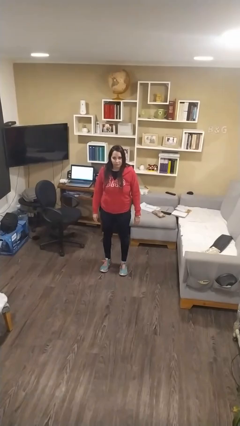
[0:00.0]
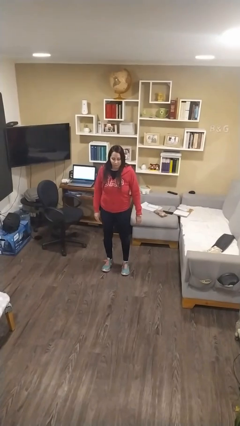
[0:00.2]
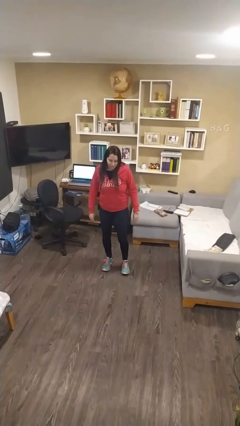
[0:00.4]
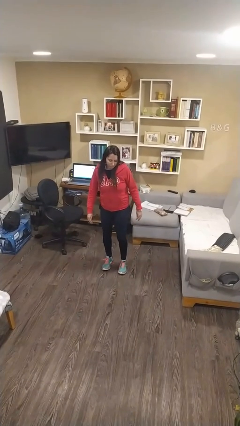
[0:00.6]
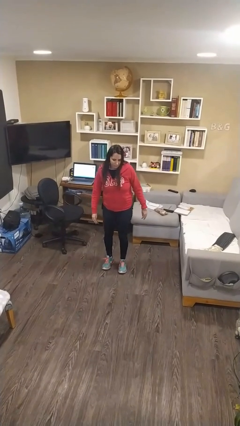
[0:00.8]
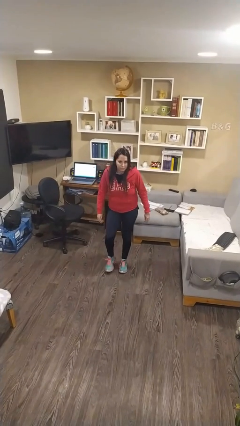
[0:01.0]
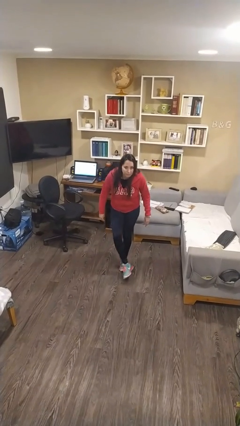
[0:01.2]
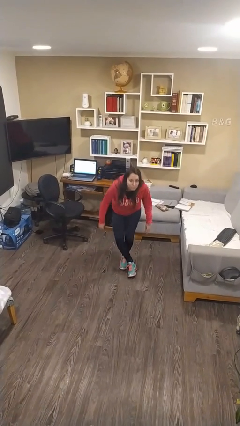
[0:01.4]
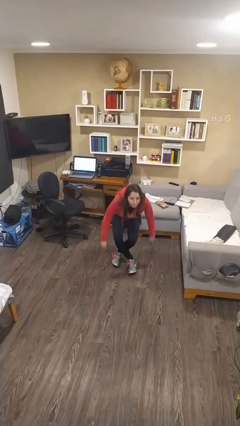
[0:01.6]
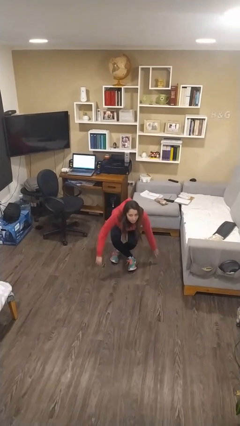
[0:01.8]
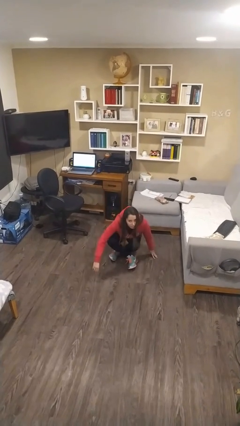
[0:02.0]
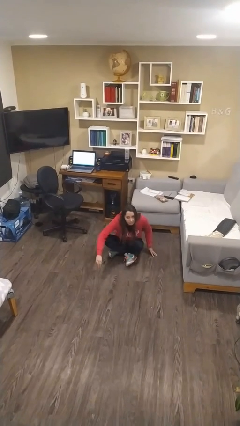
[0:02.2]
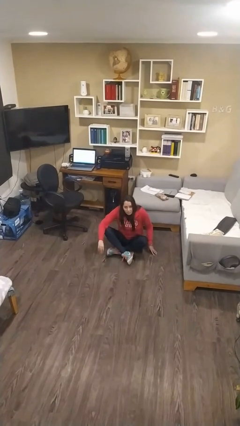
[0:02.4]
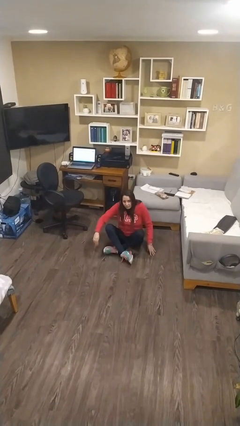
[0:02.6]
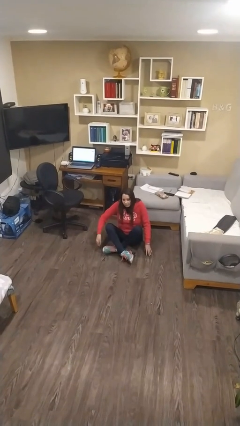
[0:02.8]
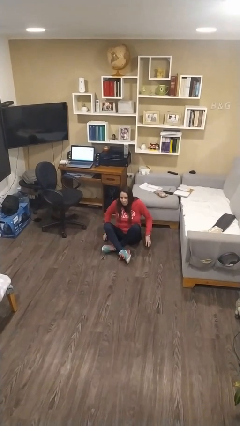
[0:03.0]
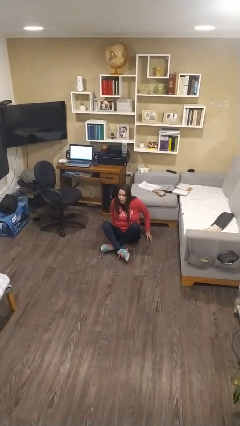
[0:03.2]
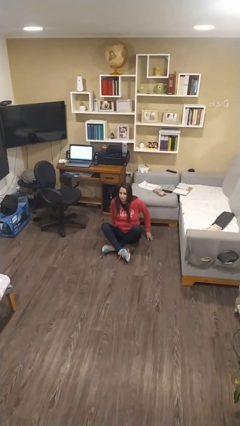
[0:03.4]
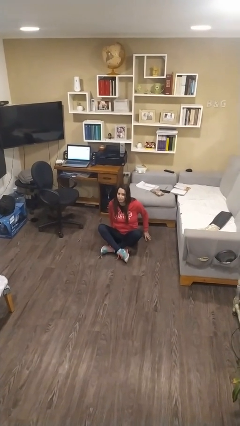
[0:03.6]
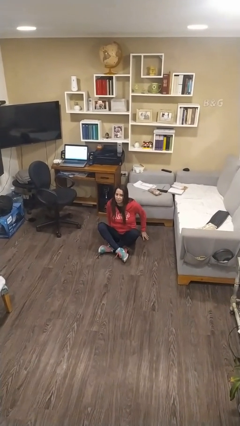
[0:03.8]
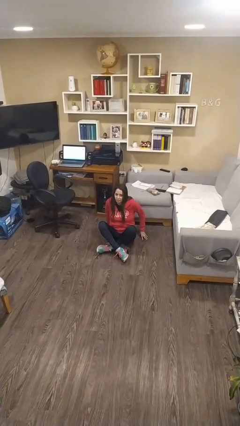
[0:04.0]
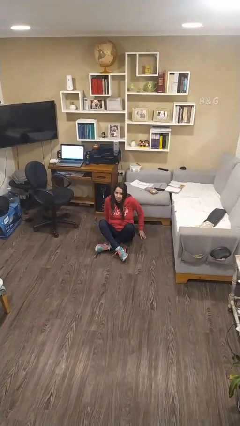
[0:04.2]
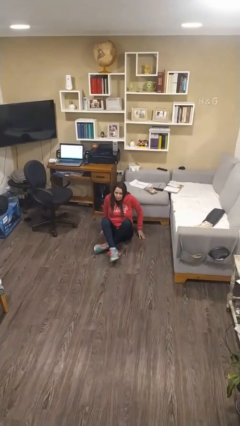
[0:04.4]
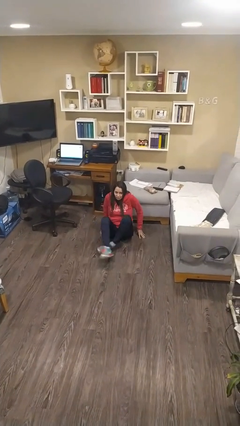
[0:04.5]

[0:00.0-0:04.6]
person sits crisscross

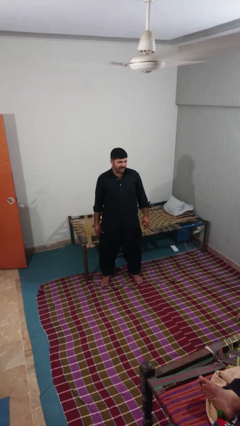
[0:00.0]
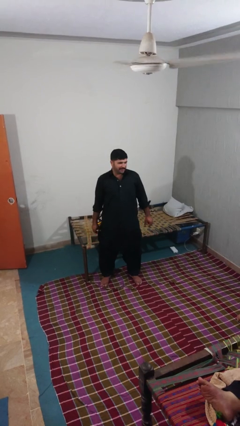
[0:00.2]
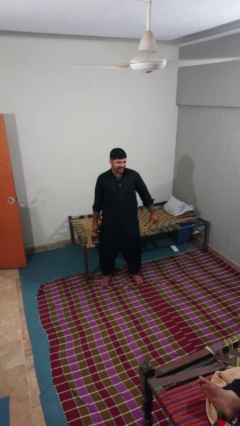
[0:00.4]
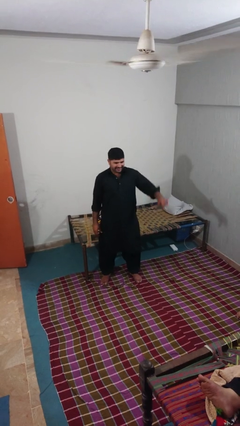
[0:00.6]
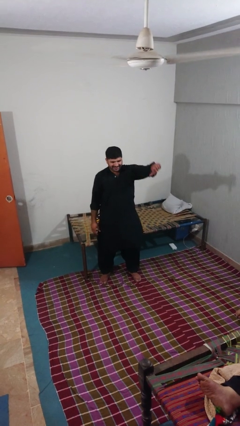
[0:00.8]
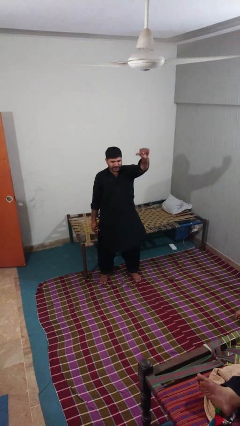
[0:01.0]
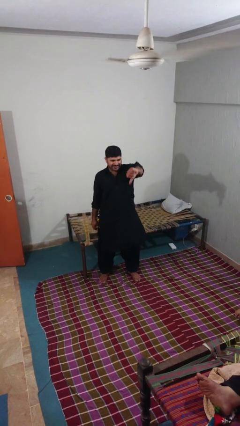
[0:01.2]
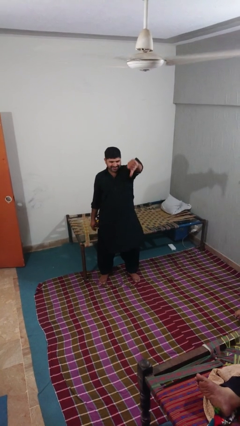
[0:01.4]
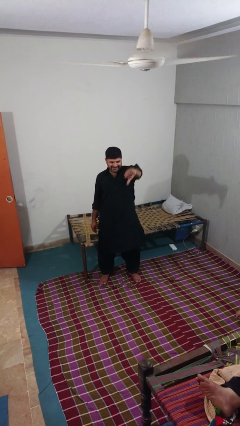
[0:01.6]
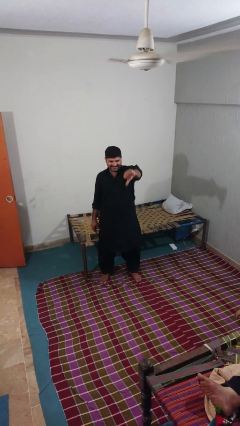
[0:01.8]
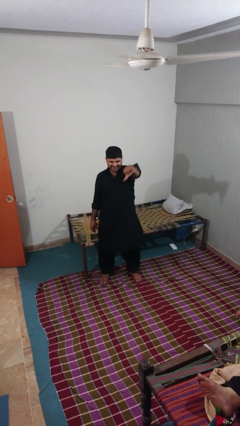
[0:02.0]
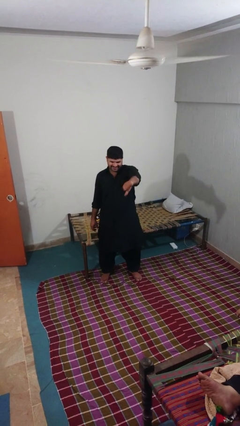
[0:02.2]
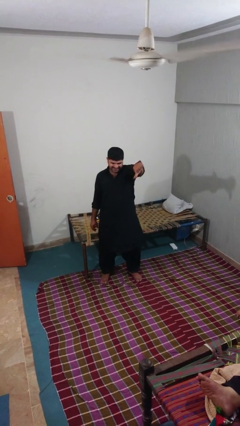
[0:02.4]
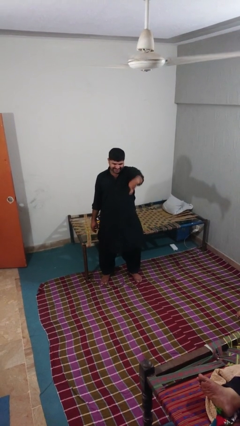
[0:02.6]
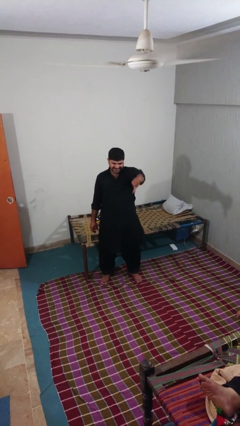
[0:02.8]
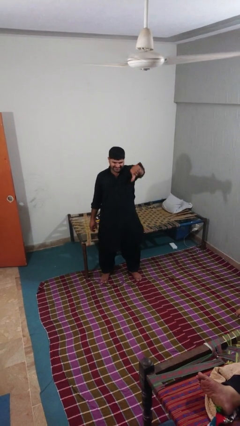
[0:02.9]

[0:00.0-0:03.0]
person gestures thumbs down

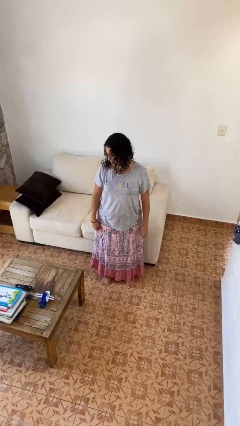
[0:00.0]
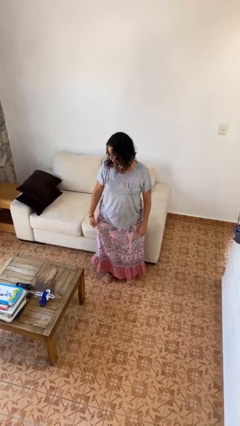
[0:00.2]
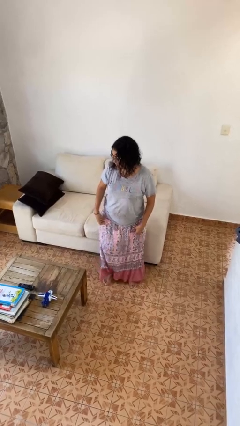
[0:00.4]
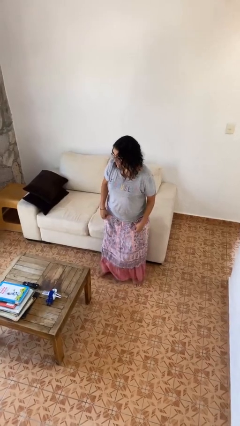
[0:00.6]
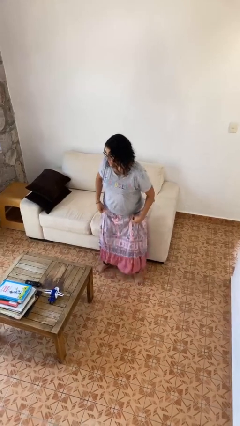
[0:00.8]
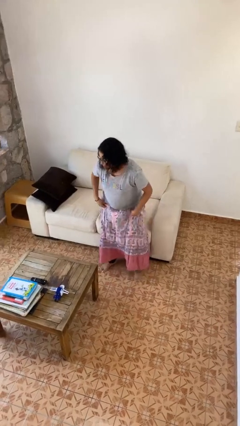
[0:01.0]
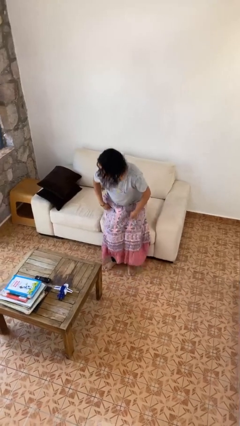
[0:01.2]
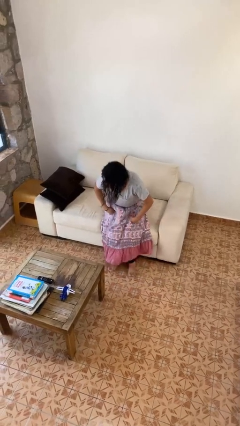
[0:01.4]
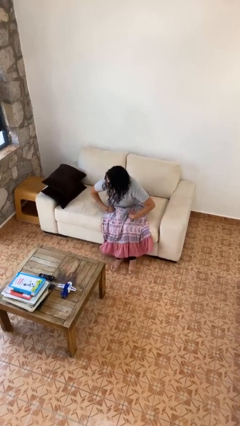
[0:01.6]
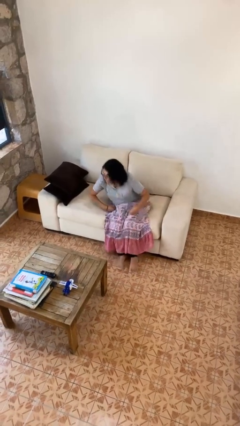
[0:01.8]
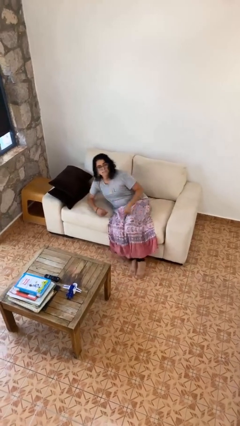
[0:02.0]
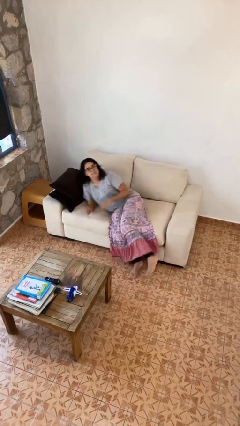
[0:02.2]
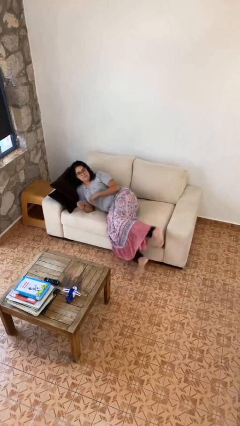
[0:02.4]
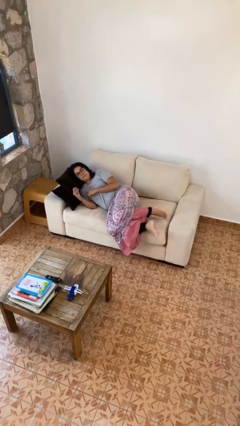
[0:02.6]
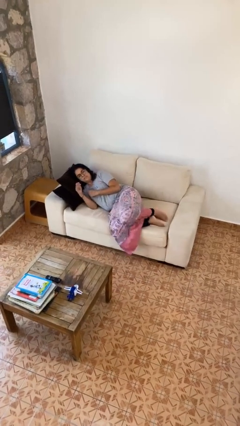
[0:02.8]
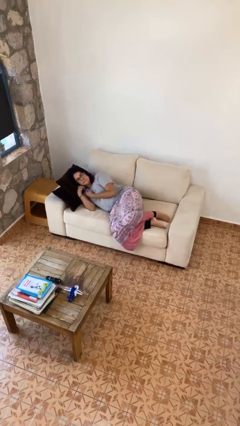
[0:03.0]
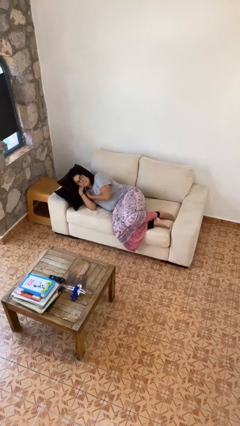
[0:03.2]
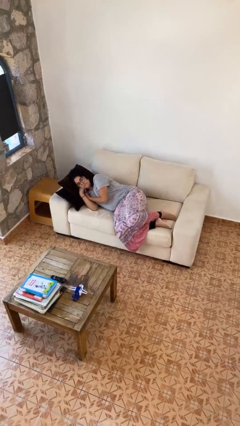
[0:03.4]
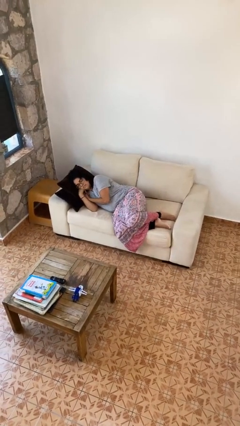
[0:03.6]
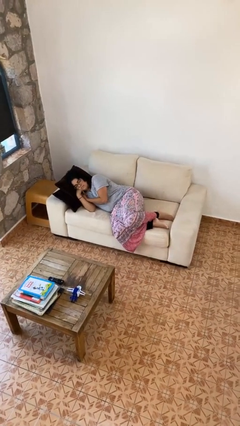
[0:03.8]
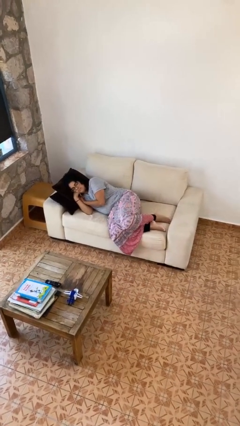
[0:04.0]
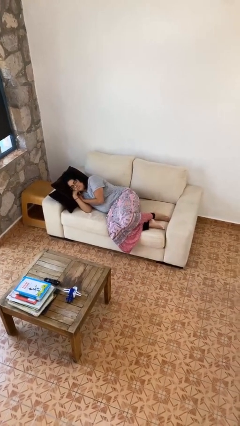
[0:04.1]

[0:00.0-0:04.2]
person lies down on couch

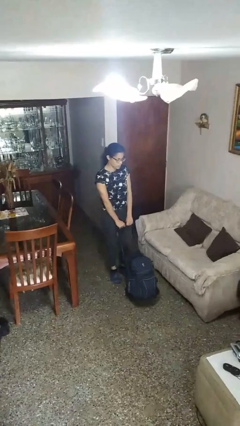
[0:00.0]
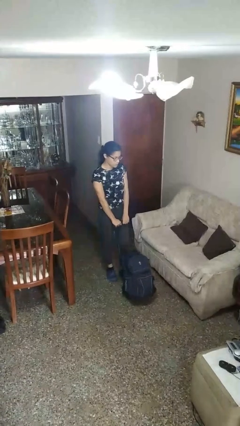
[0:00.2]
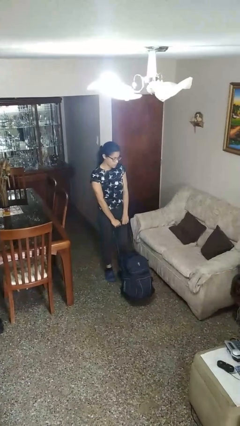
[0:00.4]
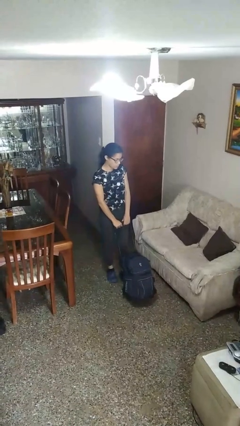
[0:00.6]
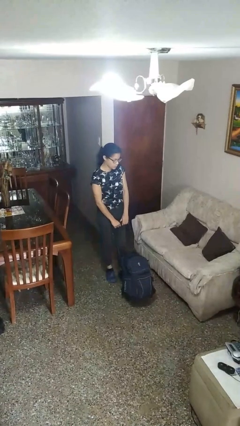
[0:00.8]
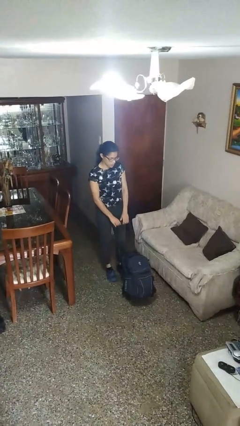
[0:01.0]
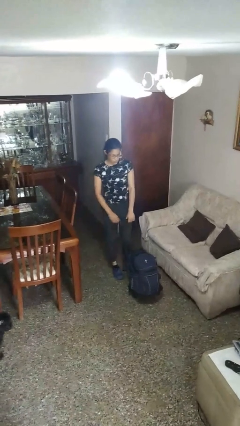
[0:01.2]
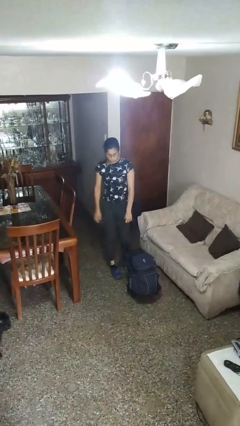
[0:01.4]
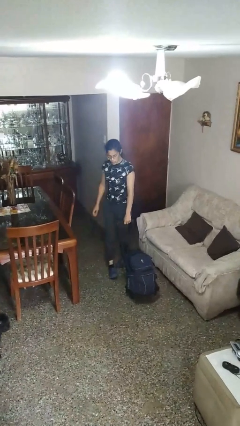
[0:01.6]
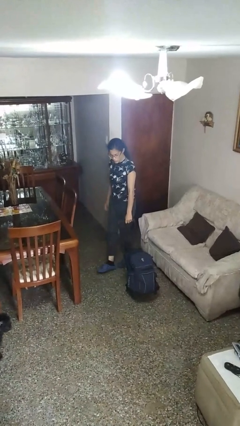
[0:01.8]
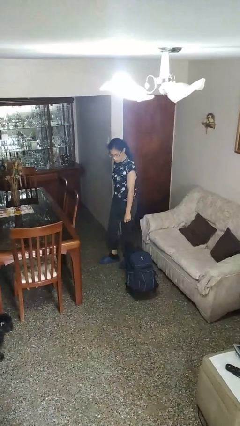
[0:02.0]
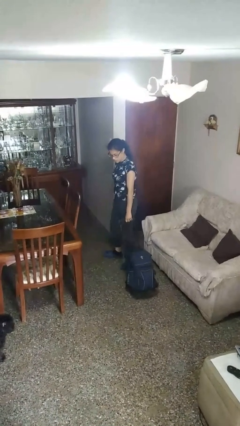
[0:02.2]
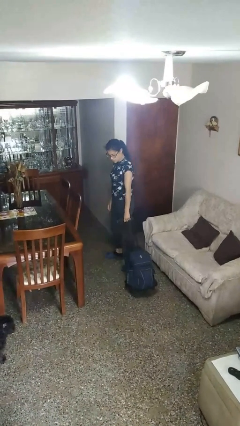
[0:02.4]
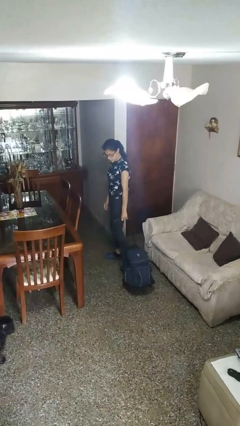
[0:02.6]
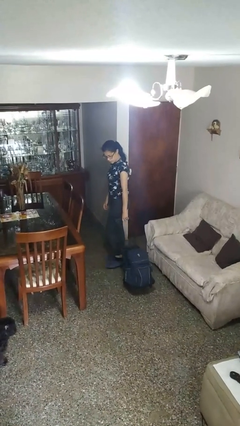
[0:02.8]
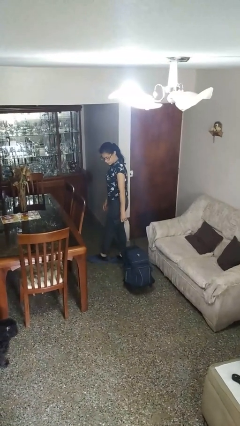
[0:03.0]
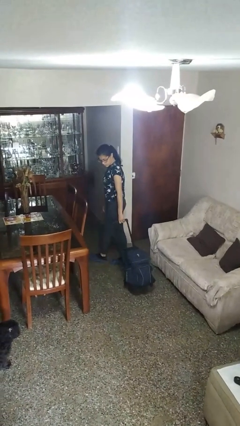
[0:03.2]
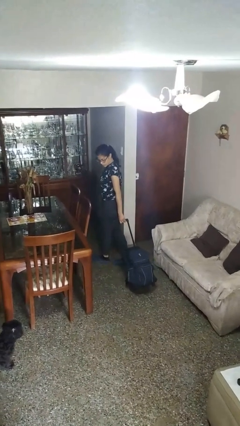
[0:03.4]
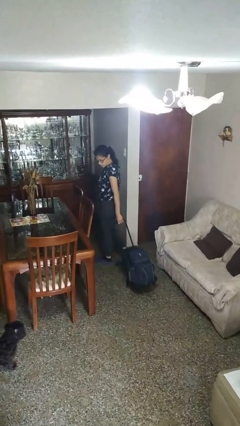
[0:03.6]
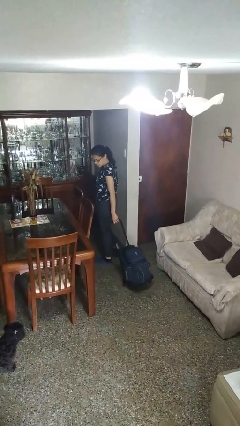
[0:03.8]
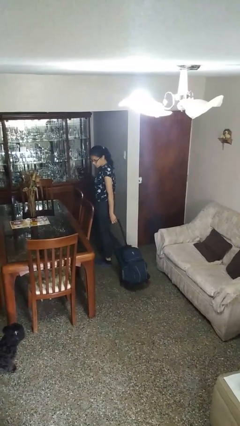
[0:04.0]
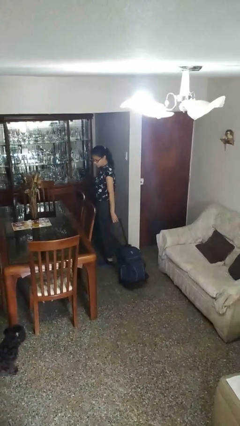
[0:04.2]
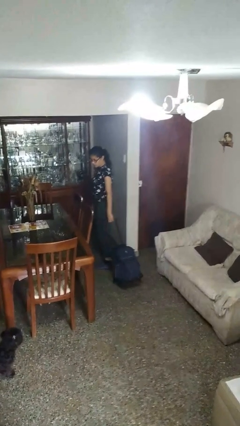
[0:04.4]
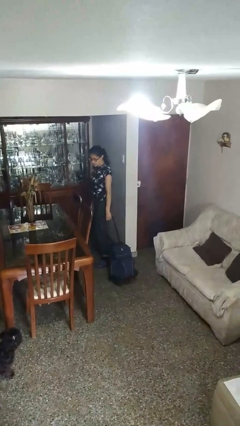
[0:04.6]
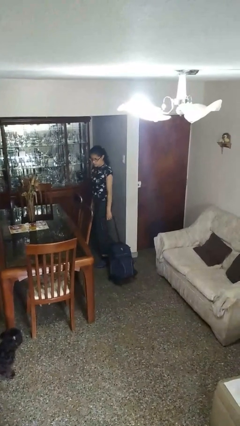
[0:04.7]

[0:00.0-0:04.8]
person pulls wheeled cart

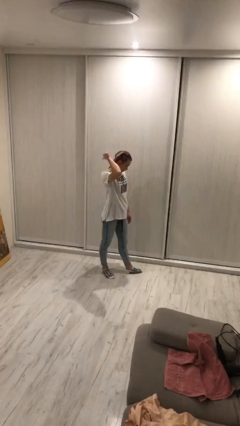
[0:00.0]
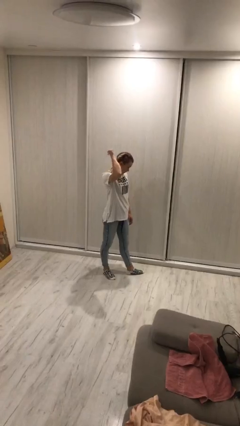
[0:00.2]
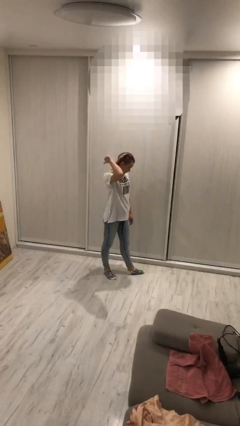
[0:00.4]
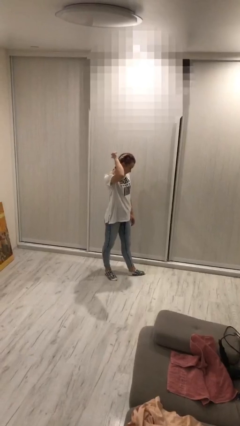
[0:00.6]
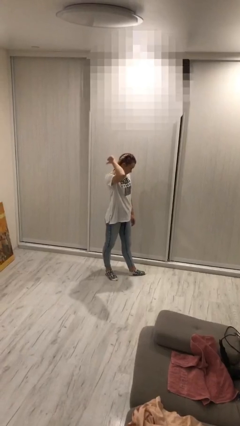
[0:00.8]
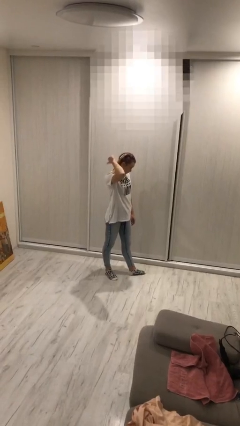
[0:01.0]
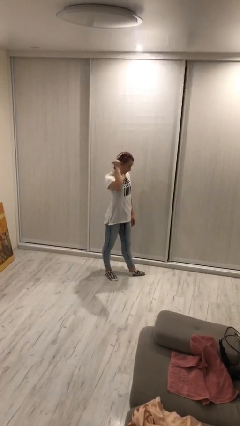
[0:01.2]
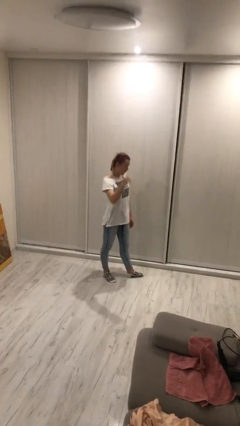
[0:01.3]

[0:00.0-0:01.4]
person gestures behind me
